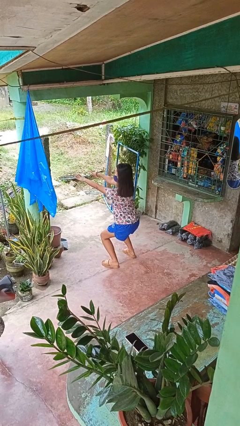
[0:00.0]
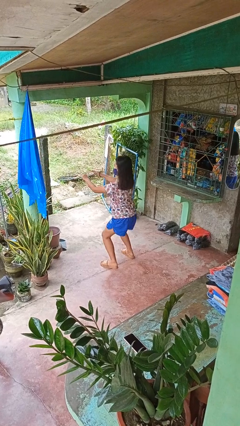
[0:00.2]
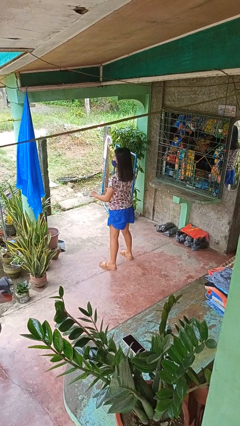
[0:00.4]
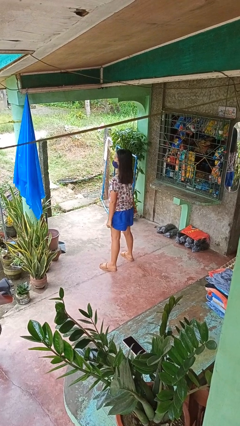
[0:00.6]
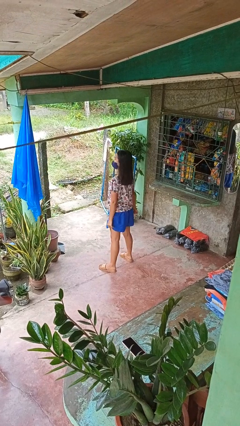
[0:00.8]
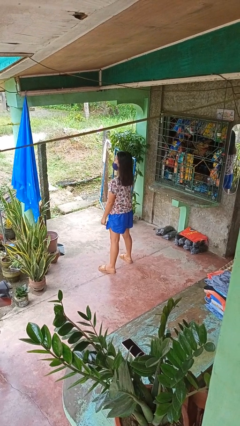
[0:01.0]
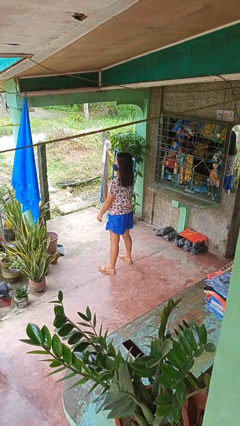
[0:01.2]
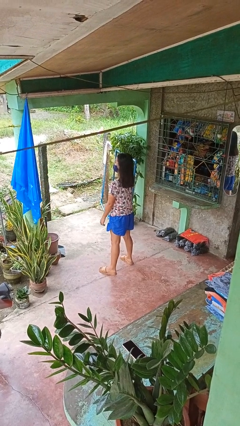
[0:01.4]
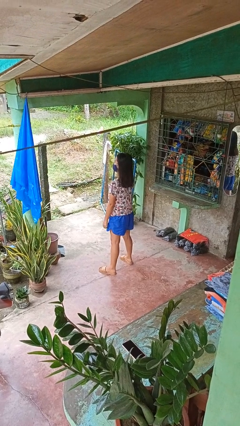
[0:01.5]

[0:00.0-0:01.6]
person stands up

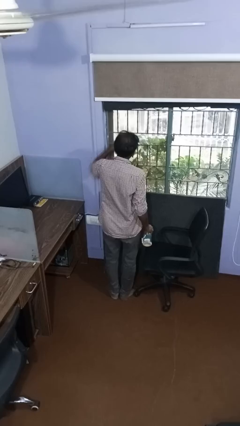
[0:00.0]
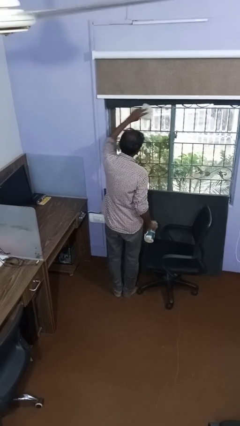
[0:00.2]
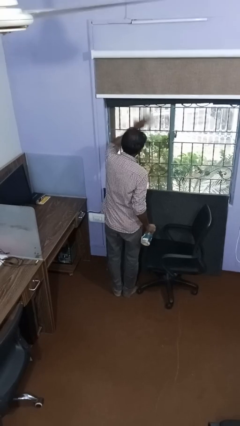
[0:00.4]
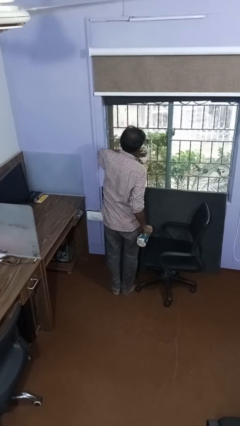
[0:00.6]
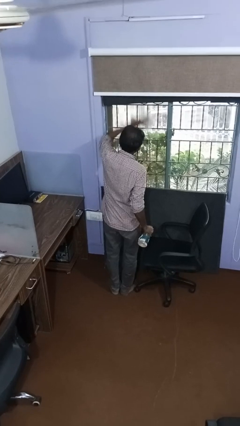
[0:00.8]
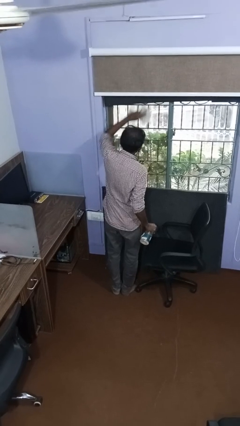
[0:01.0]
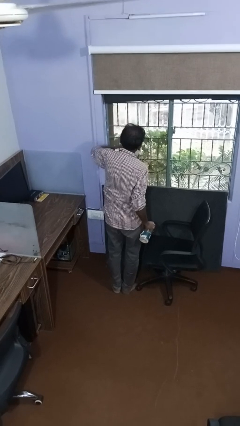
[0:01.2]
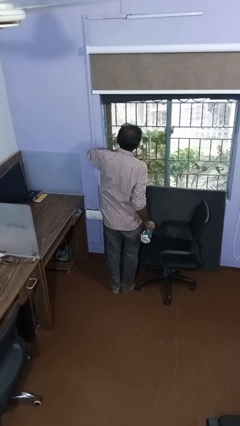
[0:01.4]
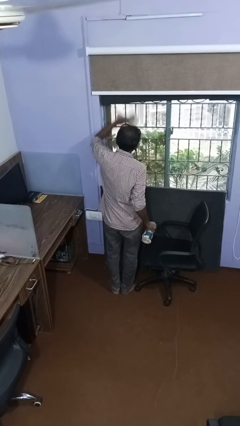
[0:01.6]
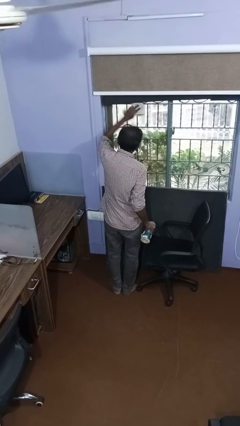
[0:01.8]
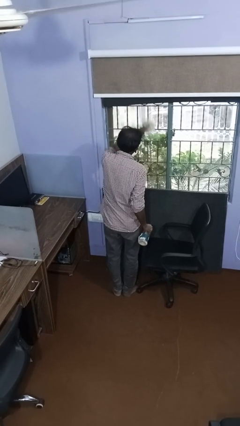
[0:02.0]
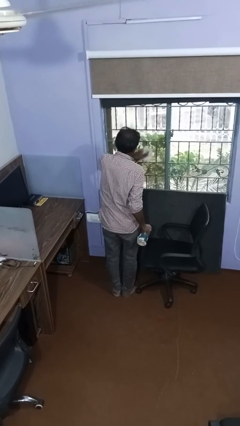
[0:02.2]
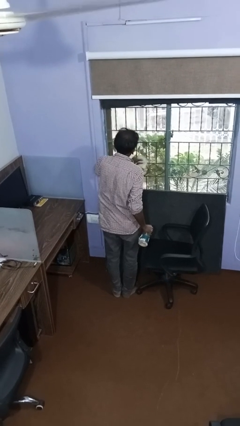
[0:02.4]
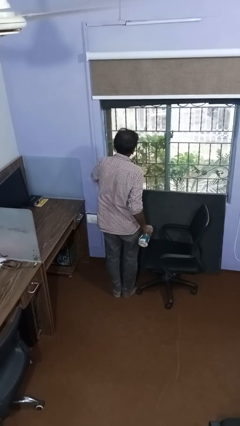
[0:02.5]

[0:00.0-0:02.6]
person washes window

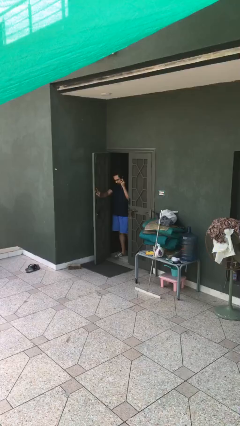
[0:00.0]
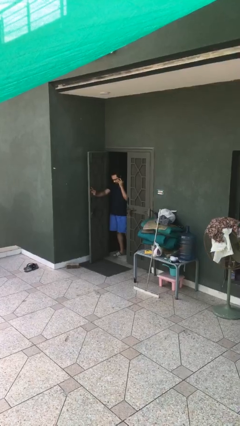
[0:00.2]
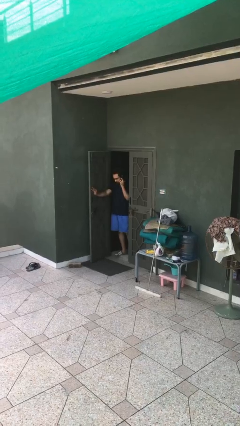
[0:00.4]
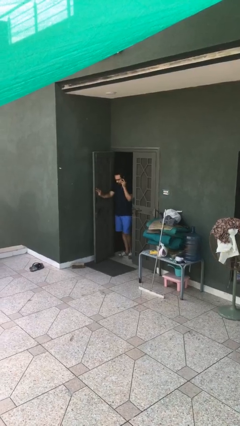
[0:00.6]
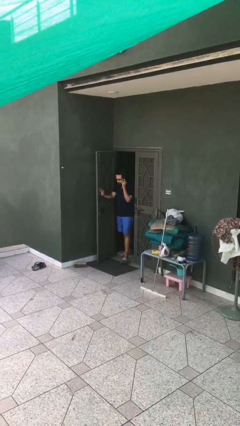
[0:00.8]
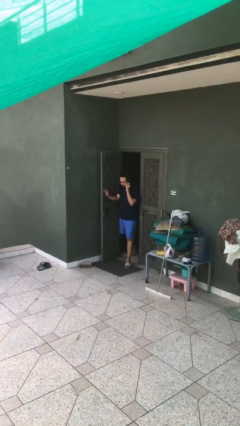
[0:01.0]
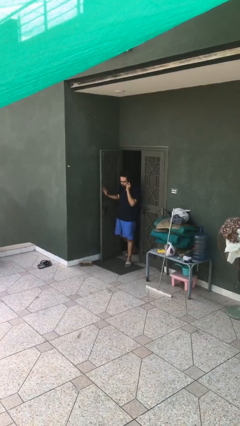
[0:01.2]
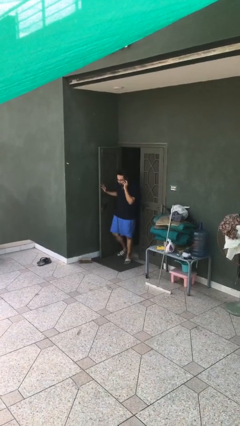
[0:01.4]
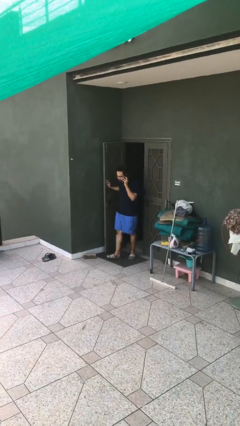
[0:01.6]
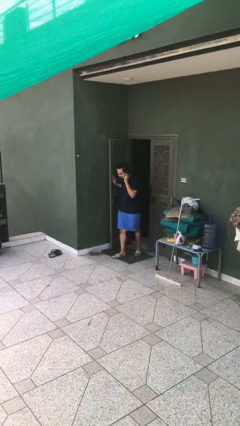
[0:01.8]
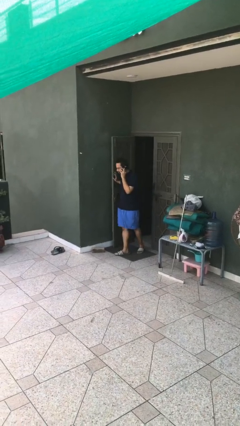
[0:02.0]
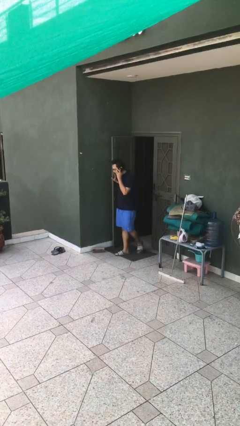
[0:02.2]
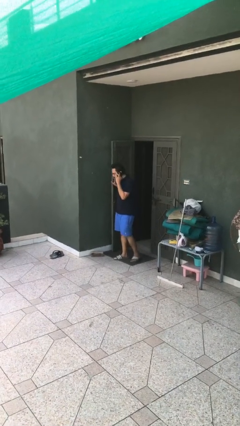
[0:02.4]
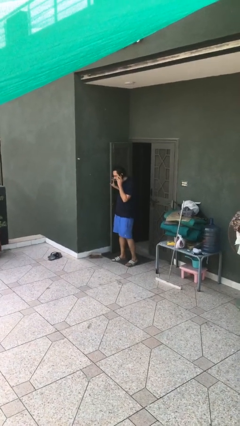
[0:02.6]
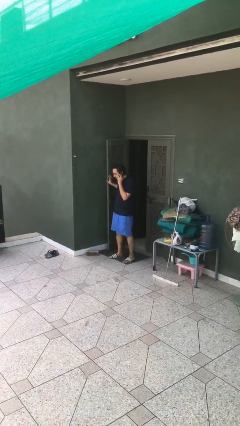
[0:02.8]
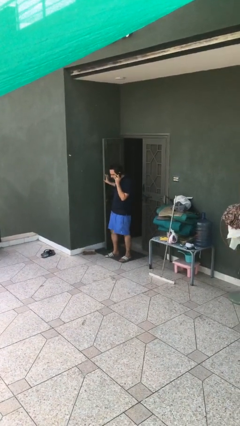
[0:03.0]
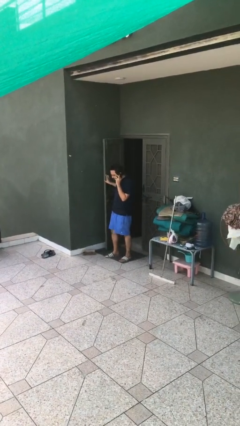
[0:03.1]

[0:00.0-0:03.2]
person enters scene through structure

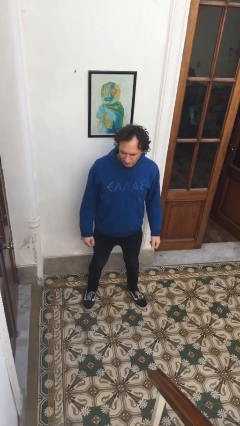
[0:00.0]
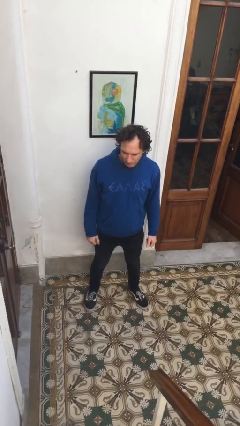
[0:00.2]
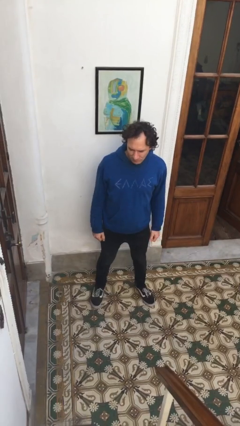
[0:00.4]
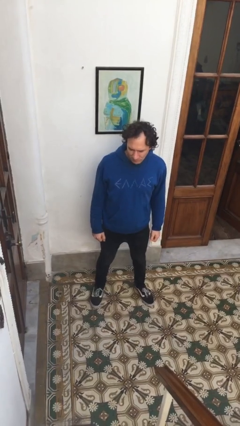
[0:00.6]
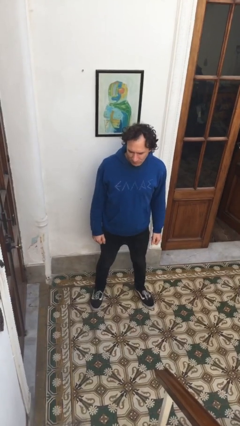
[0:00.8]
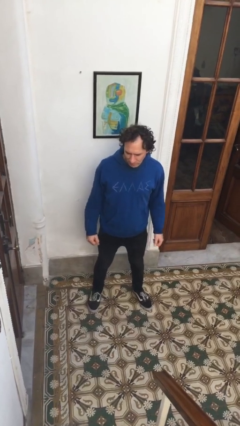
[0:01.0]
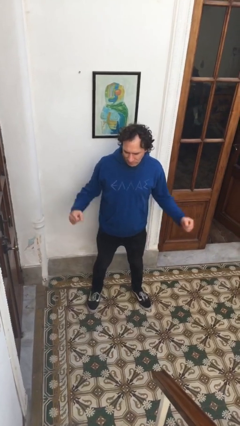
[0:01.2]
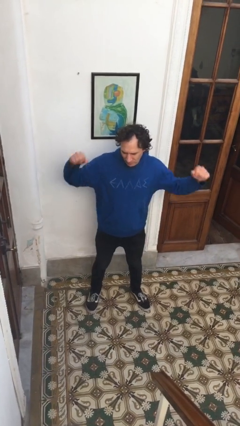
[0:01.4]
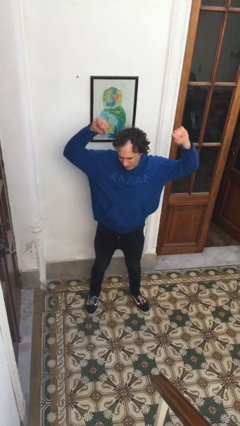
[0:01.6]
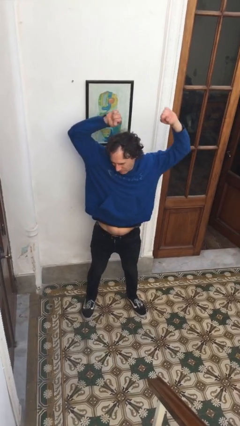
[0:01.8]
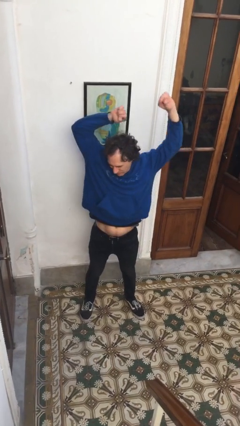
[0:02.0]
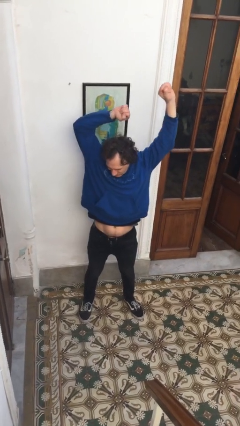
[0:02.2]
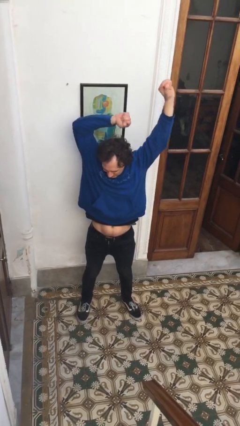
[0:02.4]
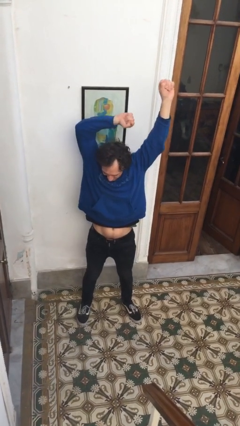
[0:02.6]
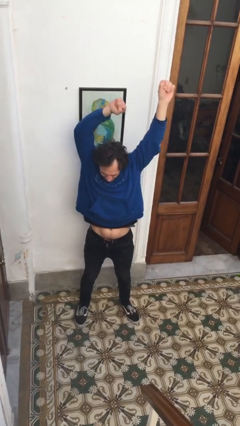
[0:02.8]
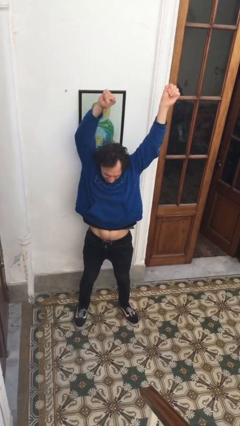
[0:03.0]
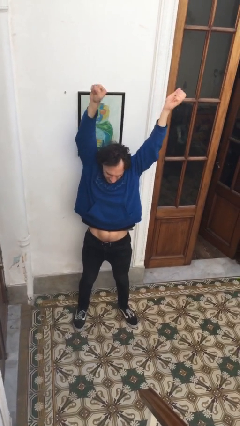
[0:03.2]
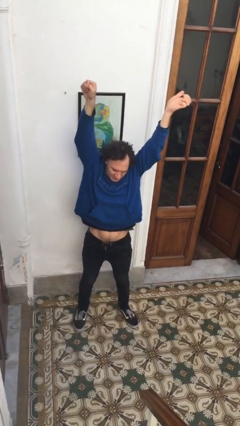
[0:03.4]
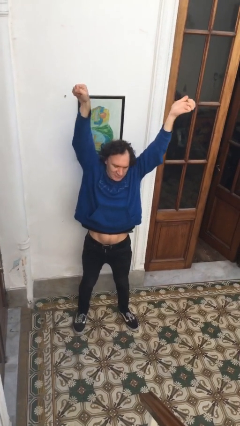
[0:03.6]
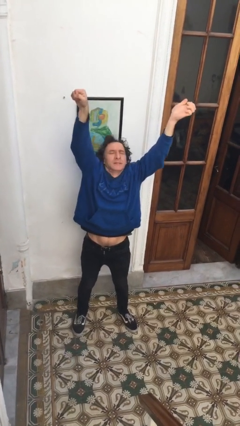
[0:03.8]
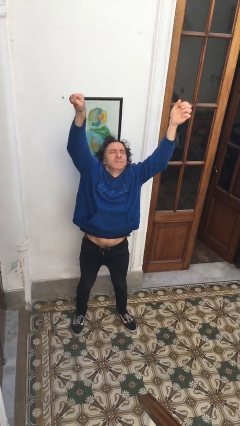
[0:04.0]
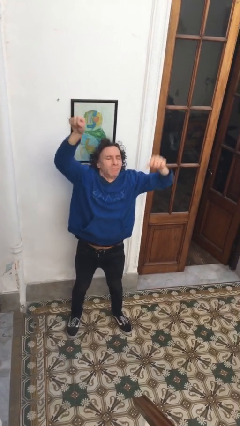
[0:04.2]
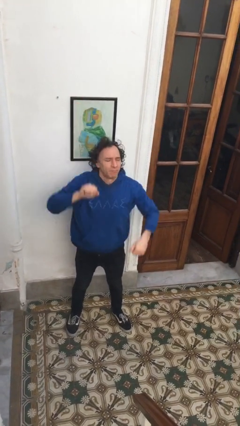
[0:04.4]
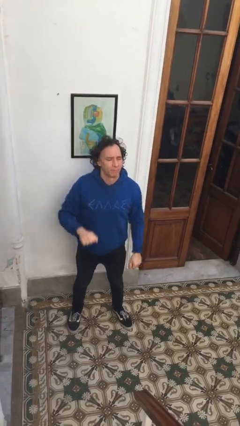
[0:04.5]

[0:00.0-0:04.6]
person stretches arms over head

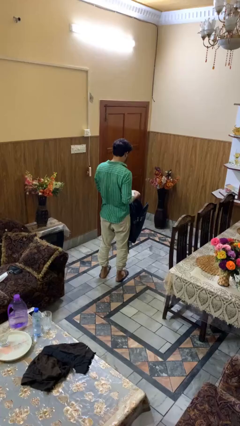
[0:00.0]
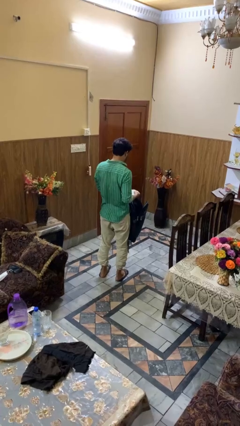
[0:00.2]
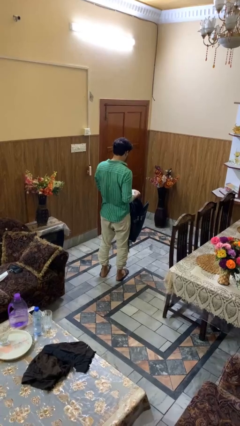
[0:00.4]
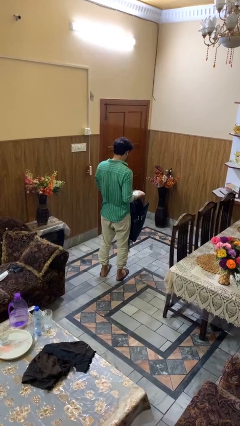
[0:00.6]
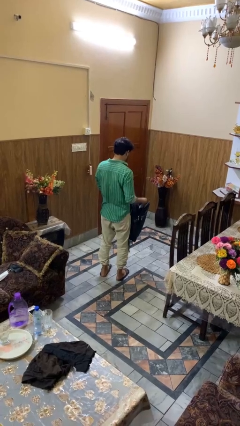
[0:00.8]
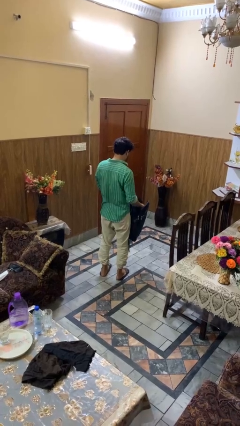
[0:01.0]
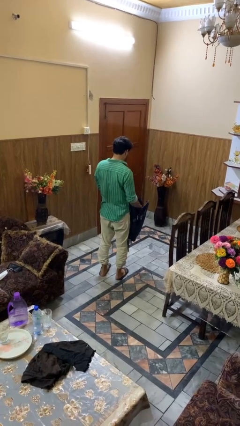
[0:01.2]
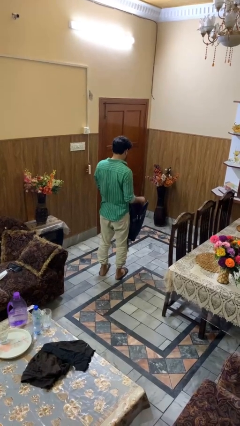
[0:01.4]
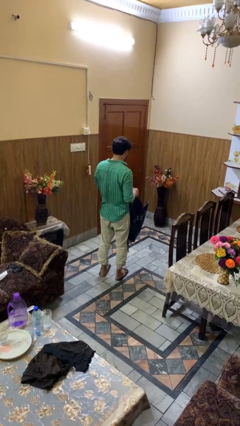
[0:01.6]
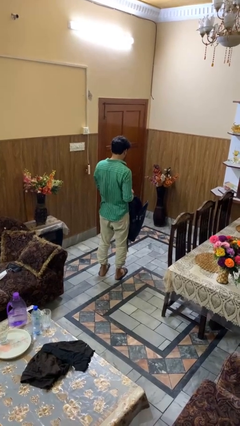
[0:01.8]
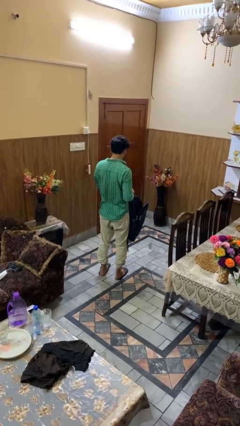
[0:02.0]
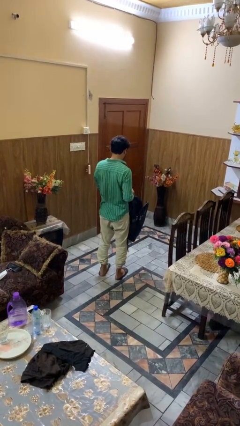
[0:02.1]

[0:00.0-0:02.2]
person puts object into backpack

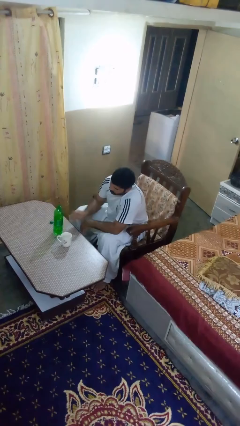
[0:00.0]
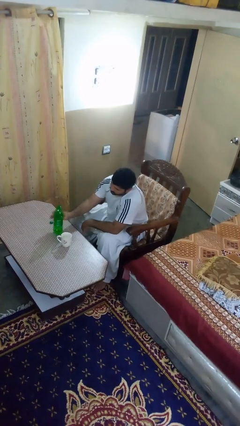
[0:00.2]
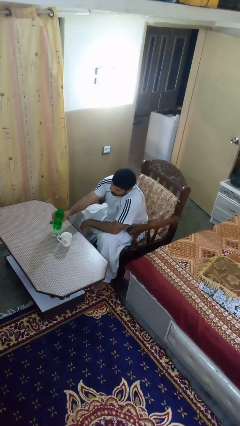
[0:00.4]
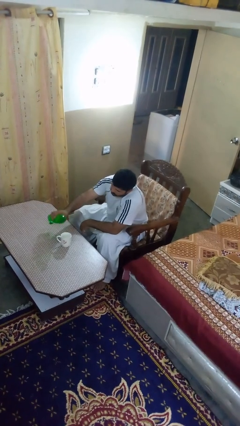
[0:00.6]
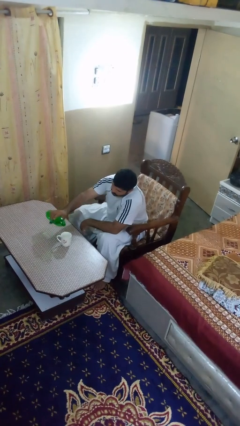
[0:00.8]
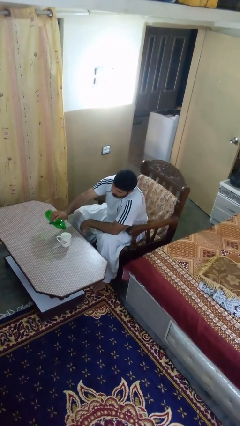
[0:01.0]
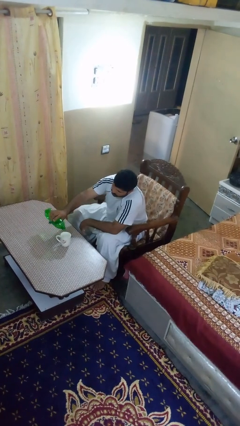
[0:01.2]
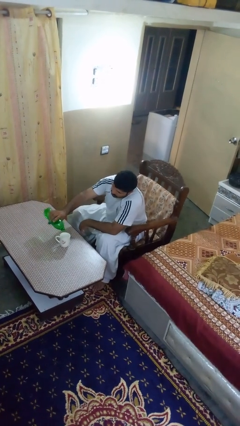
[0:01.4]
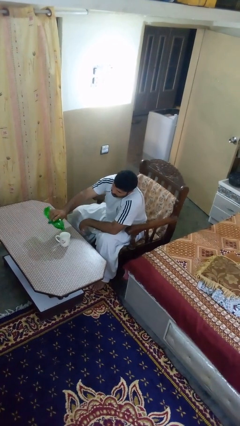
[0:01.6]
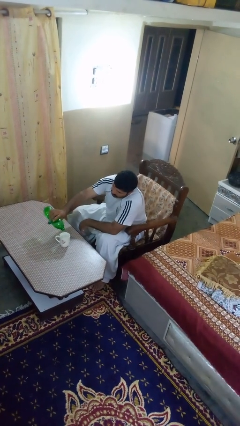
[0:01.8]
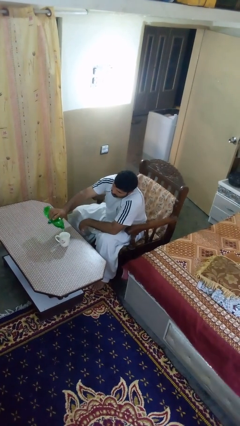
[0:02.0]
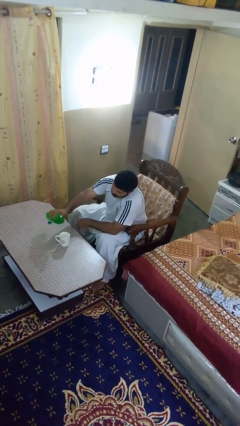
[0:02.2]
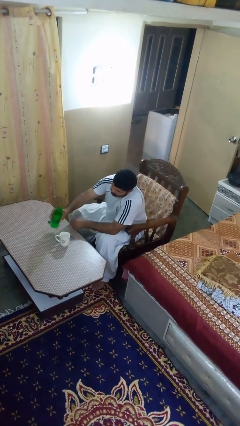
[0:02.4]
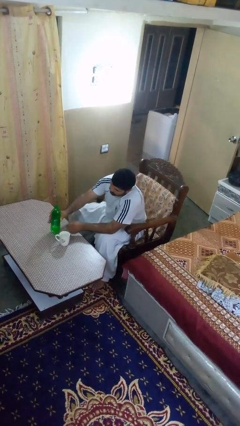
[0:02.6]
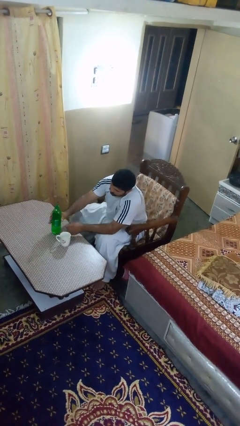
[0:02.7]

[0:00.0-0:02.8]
person pours liquid into cup

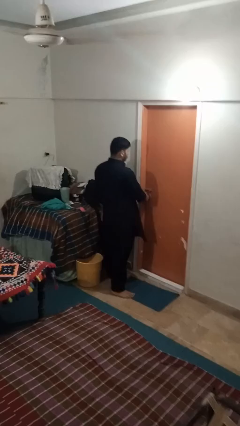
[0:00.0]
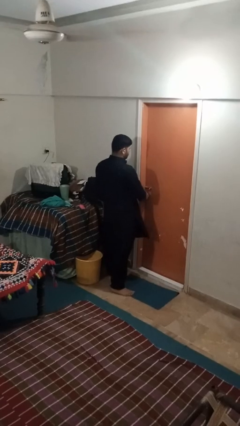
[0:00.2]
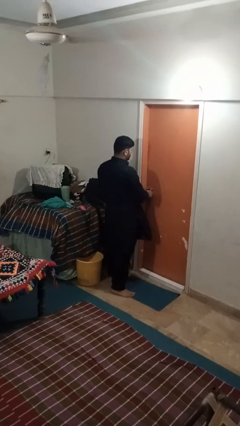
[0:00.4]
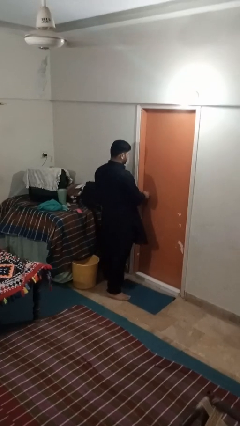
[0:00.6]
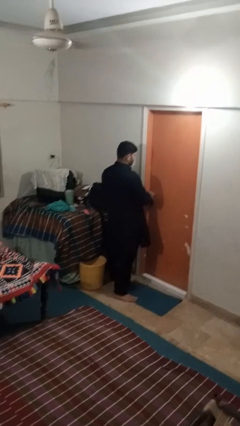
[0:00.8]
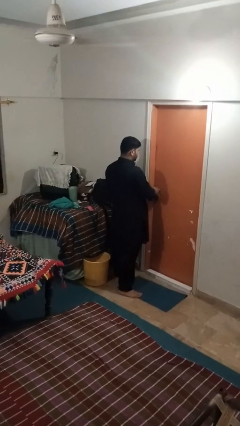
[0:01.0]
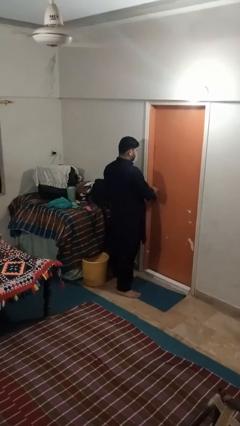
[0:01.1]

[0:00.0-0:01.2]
person locks door with keys
